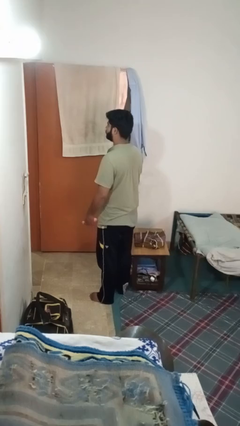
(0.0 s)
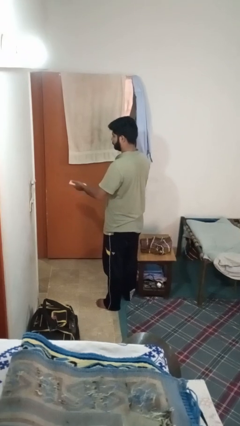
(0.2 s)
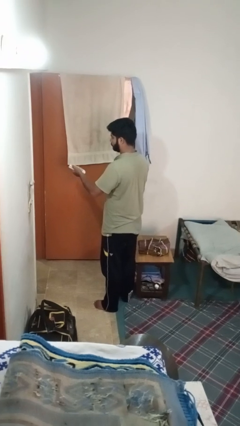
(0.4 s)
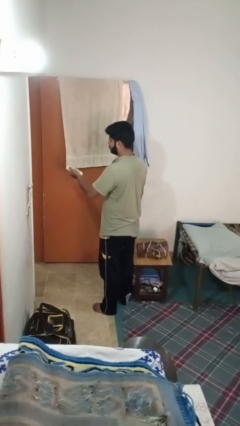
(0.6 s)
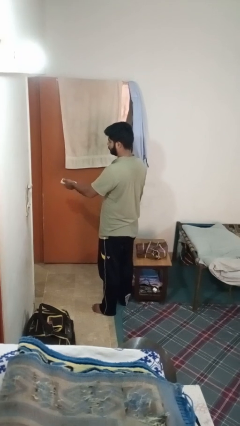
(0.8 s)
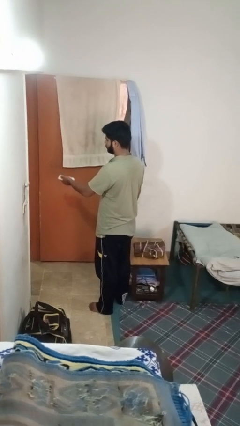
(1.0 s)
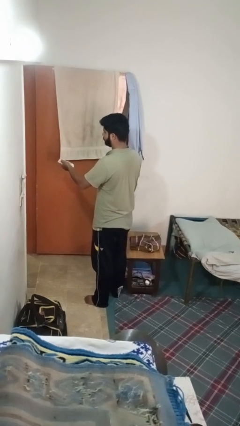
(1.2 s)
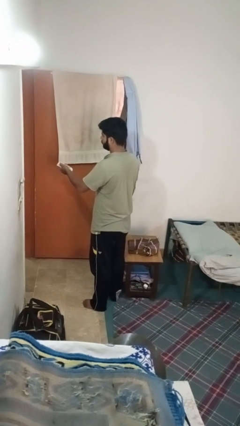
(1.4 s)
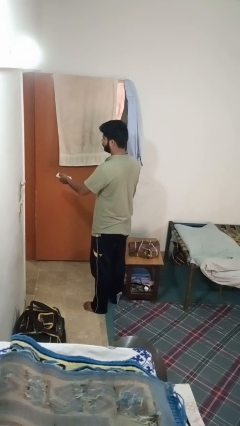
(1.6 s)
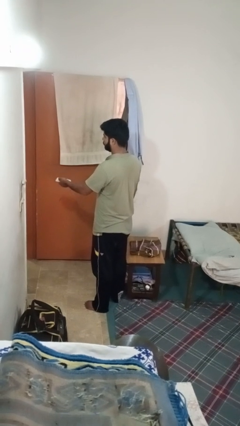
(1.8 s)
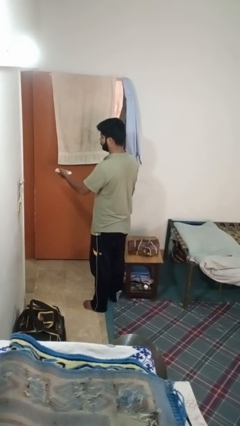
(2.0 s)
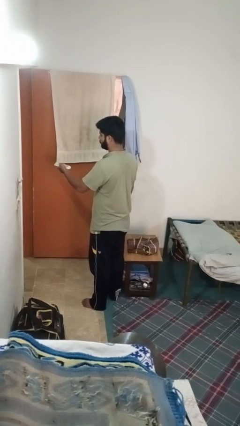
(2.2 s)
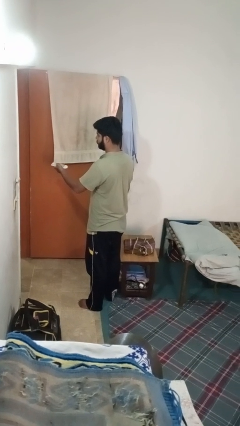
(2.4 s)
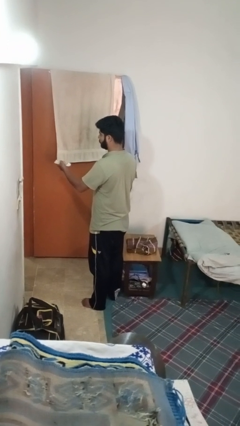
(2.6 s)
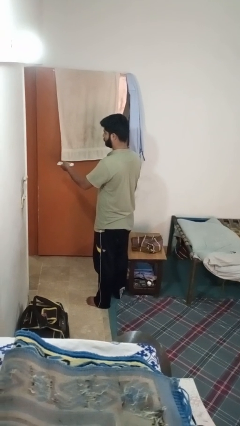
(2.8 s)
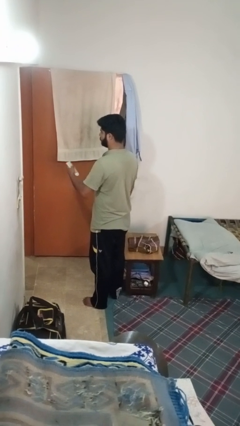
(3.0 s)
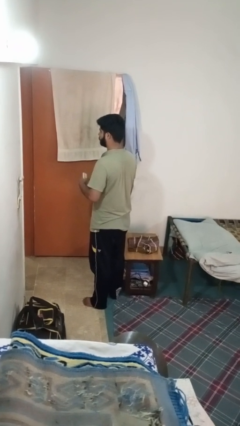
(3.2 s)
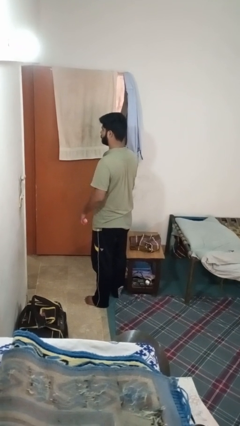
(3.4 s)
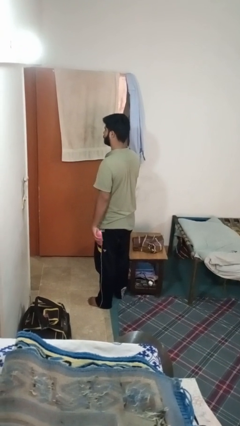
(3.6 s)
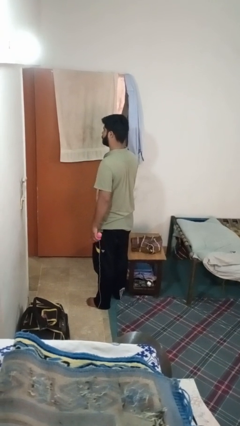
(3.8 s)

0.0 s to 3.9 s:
person uses television remote

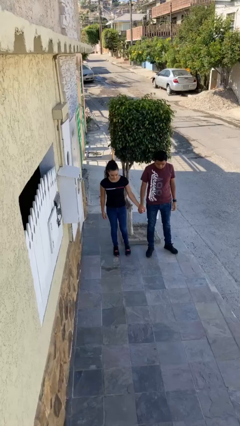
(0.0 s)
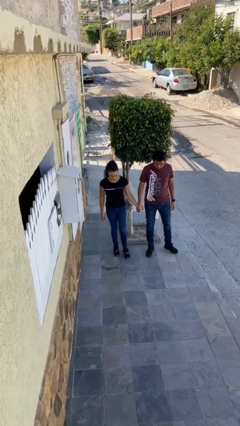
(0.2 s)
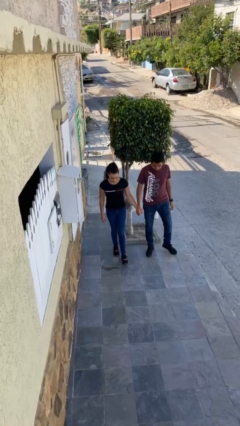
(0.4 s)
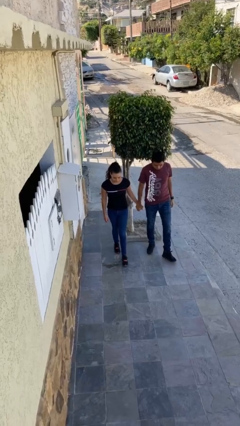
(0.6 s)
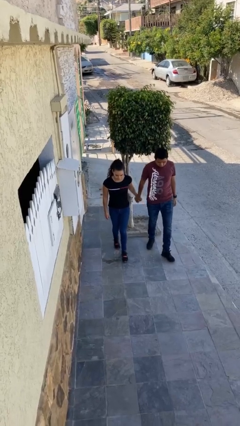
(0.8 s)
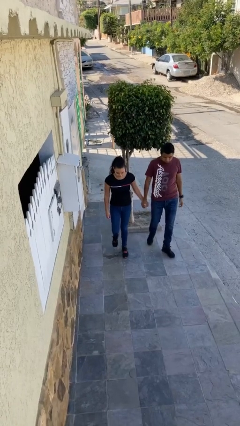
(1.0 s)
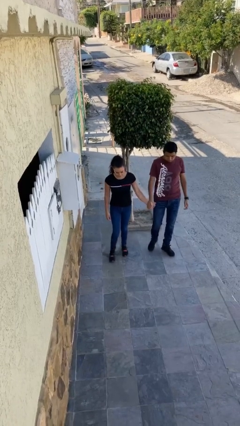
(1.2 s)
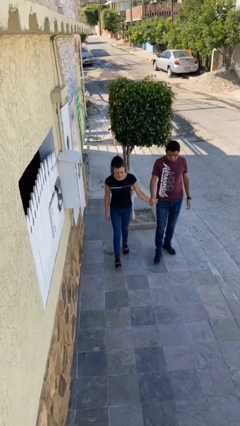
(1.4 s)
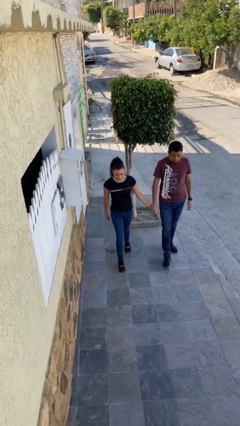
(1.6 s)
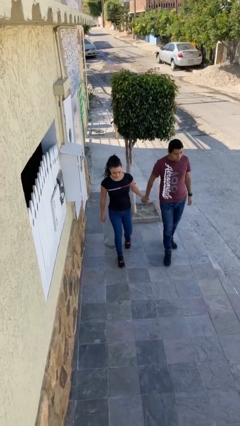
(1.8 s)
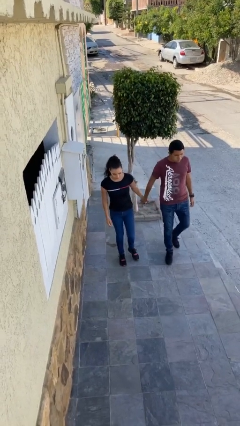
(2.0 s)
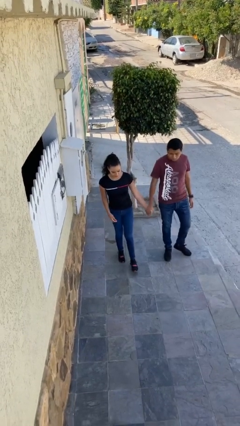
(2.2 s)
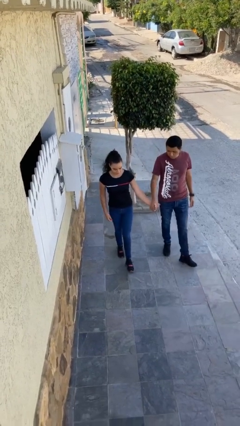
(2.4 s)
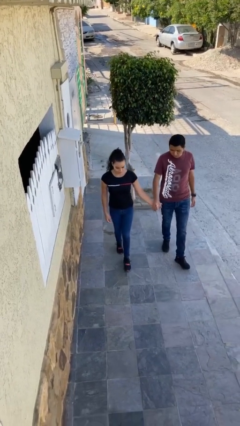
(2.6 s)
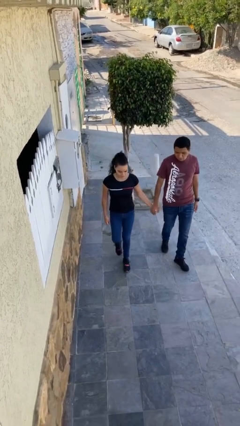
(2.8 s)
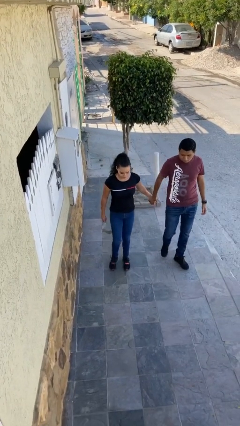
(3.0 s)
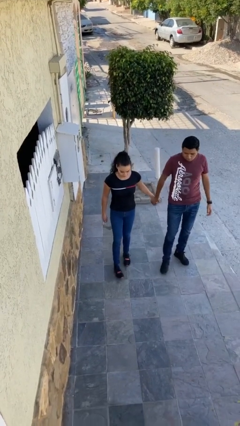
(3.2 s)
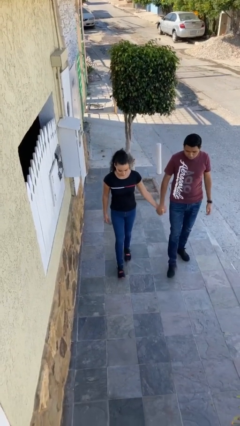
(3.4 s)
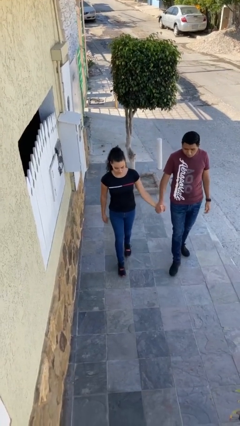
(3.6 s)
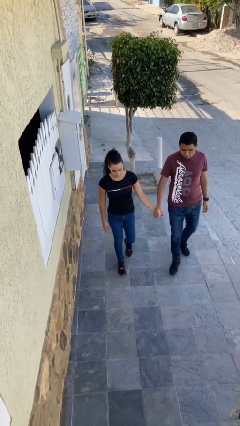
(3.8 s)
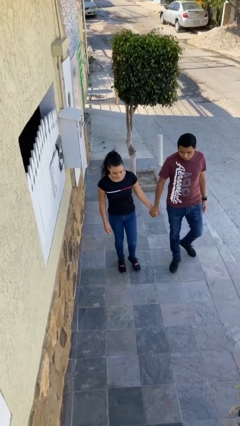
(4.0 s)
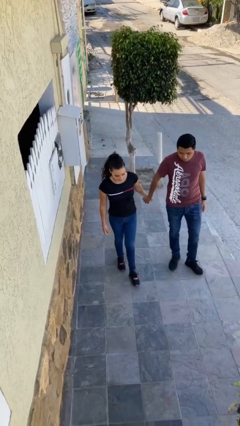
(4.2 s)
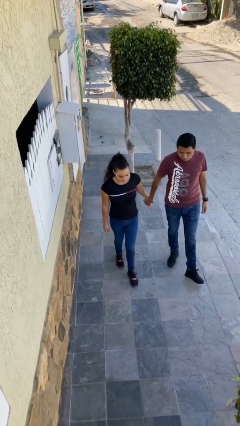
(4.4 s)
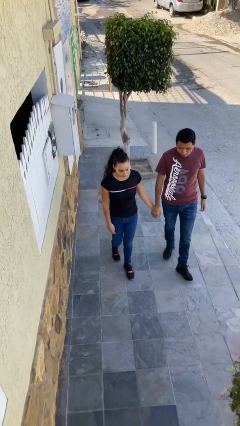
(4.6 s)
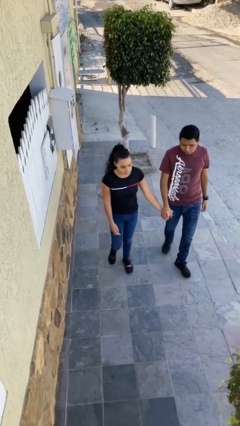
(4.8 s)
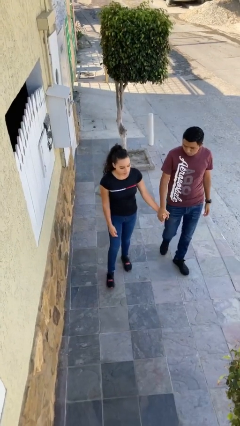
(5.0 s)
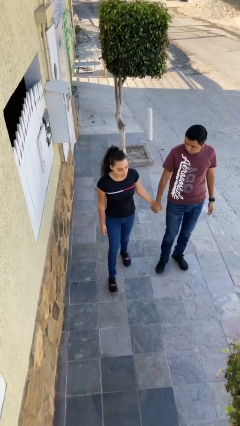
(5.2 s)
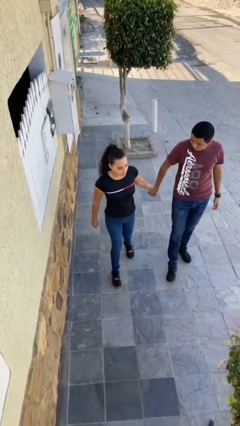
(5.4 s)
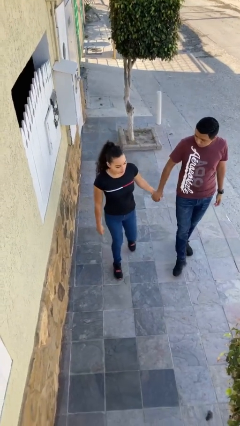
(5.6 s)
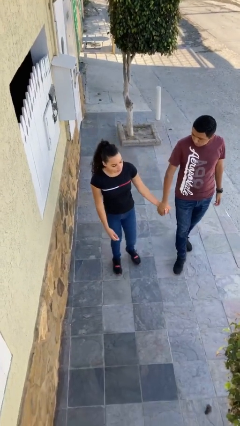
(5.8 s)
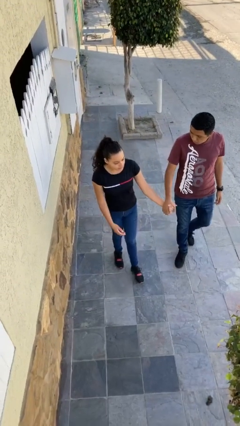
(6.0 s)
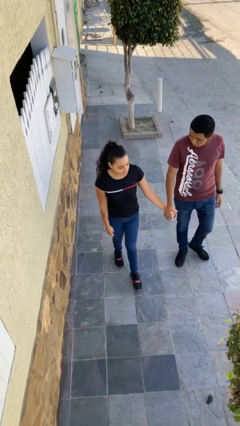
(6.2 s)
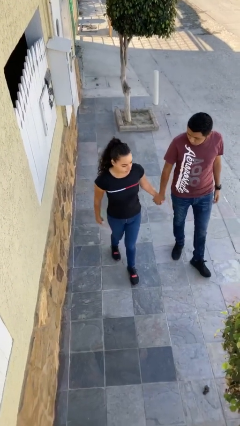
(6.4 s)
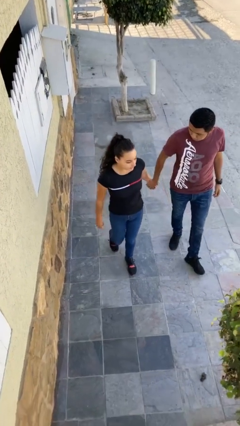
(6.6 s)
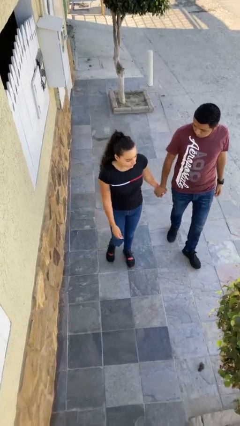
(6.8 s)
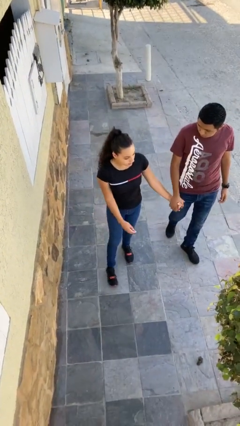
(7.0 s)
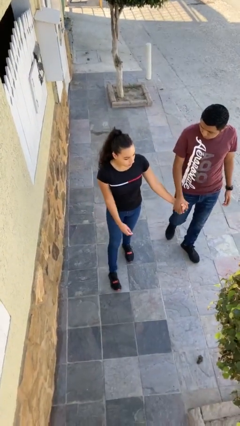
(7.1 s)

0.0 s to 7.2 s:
person holds hand

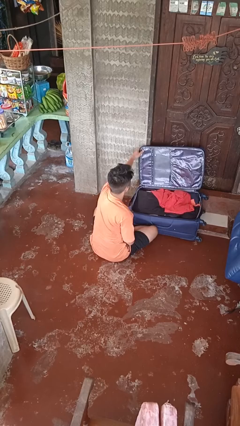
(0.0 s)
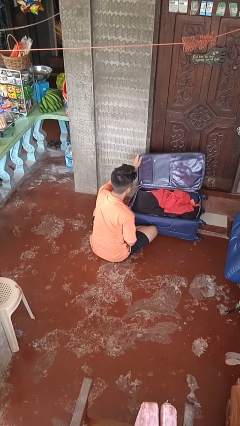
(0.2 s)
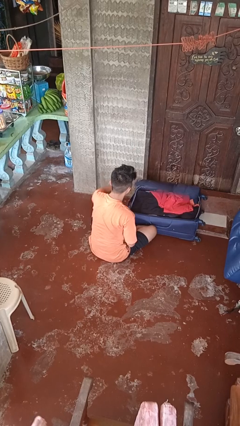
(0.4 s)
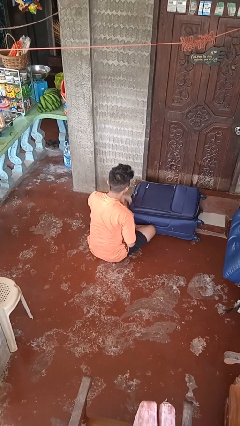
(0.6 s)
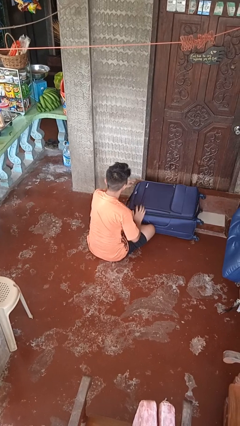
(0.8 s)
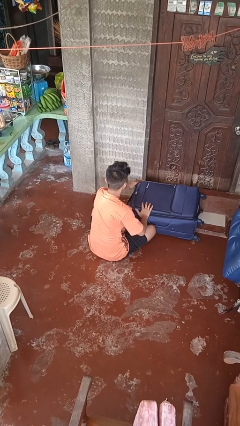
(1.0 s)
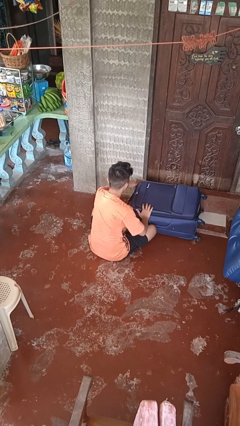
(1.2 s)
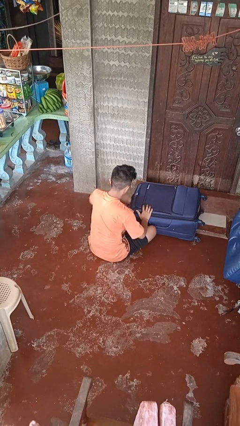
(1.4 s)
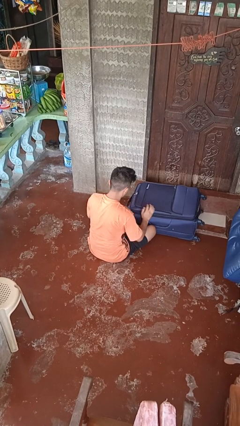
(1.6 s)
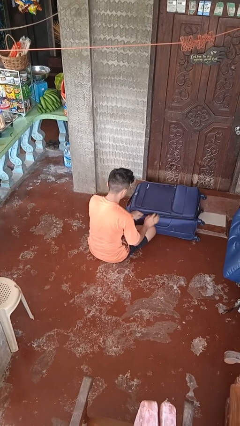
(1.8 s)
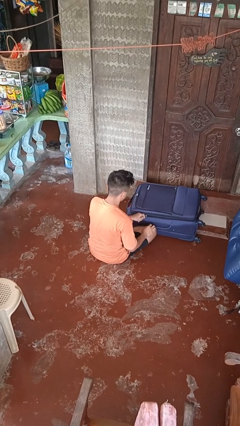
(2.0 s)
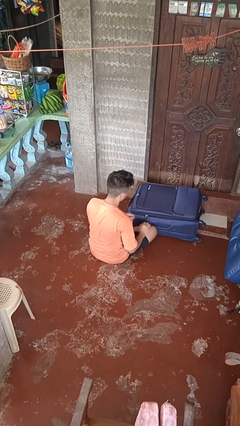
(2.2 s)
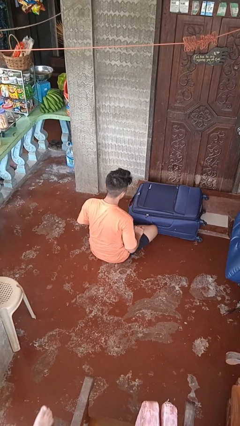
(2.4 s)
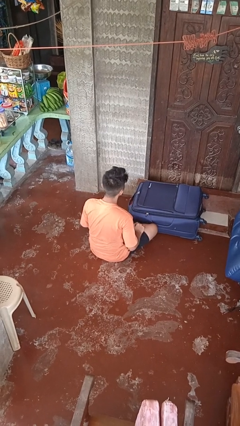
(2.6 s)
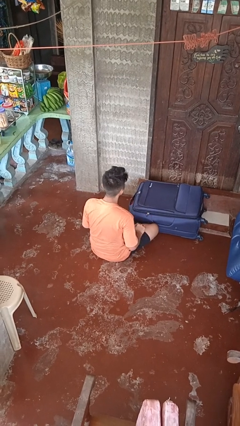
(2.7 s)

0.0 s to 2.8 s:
person closes suitcase

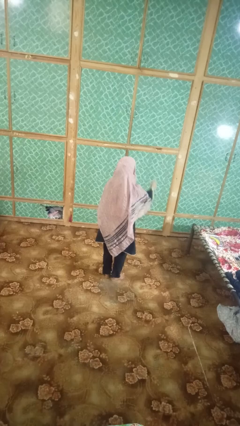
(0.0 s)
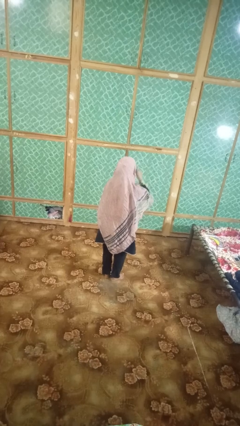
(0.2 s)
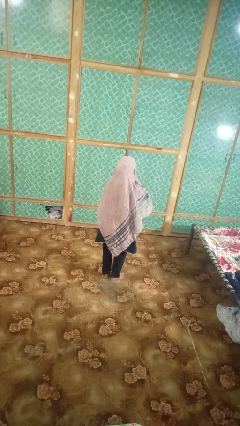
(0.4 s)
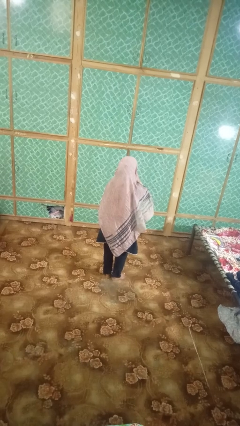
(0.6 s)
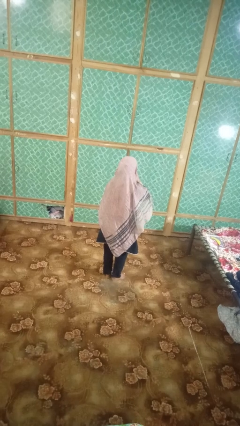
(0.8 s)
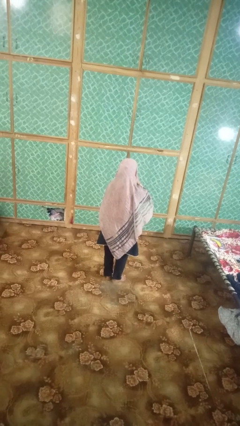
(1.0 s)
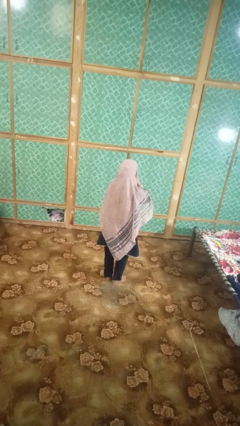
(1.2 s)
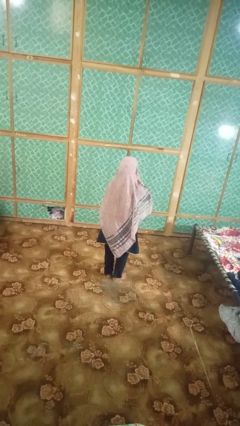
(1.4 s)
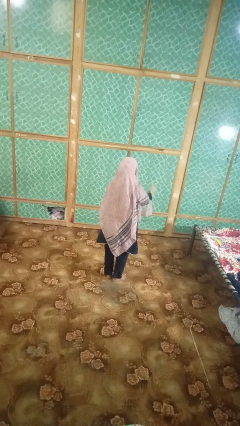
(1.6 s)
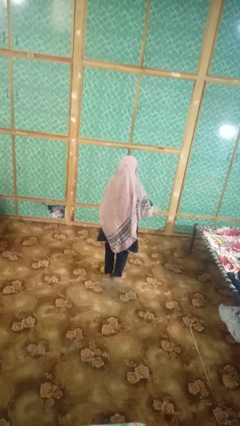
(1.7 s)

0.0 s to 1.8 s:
person gestures be quiet

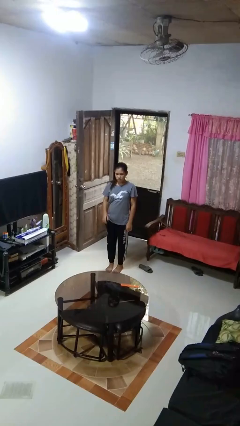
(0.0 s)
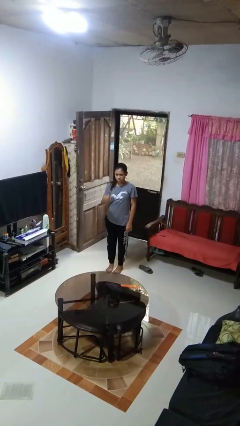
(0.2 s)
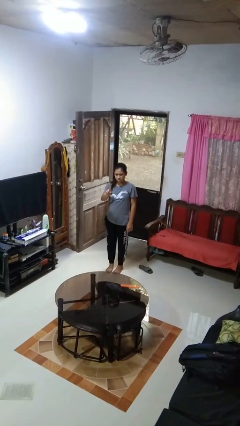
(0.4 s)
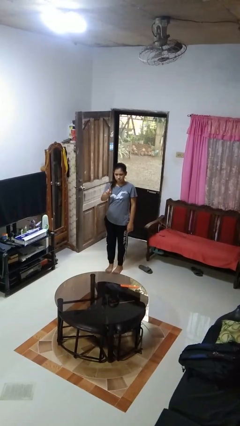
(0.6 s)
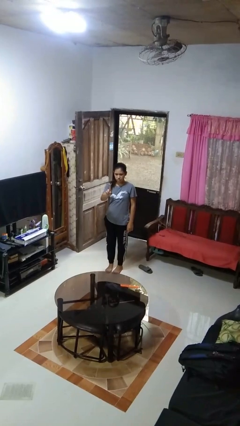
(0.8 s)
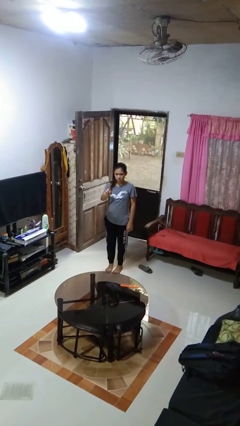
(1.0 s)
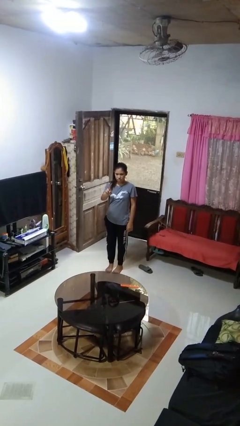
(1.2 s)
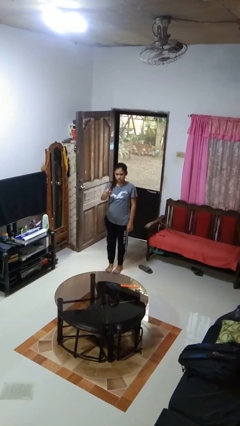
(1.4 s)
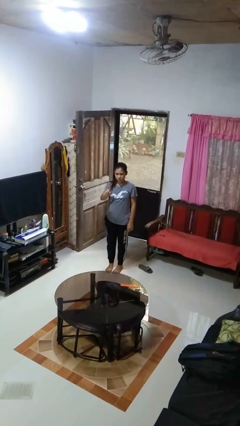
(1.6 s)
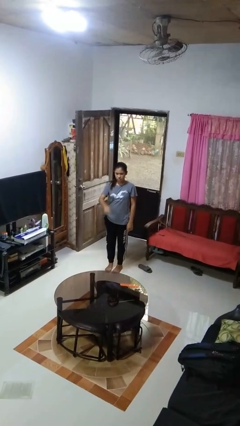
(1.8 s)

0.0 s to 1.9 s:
person gestures number one

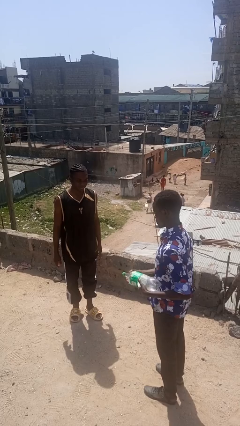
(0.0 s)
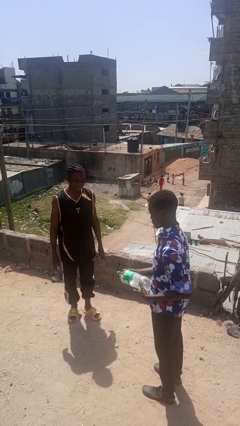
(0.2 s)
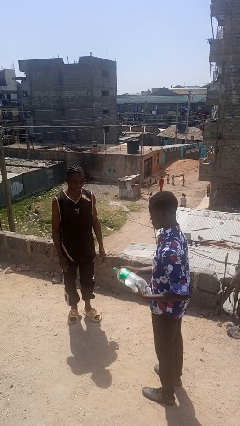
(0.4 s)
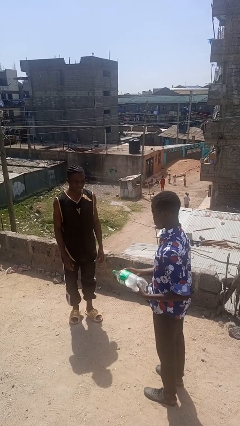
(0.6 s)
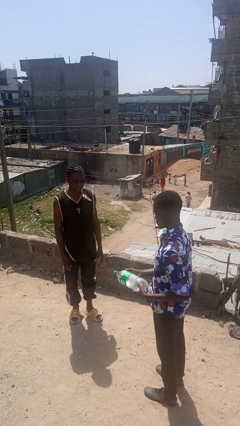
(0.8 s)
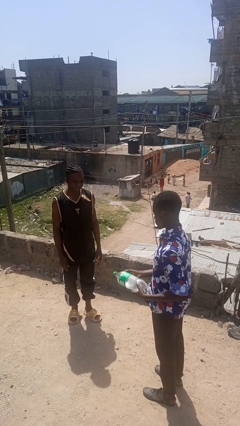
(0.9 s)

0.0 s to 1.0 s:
person catches object from person
